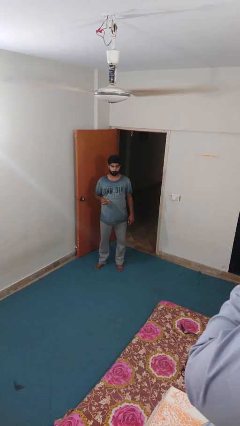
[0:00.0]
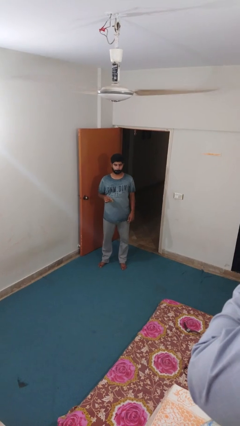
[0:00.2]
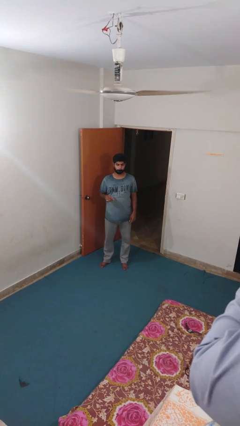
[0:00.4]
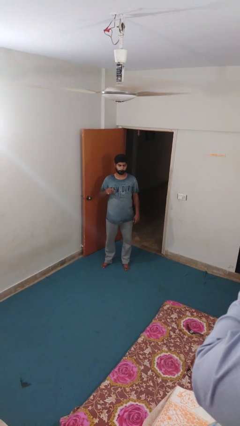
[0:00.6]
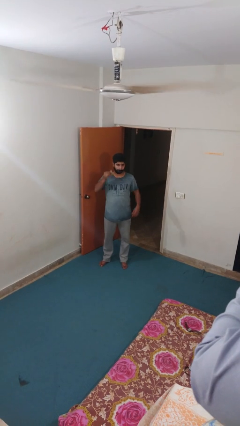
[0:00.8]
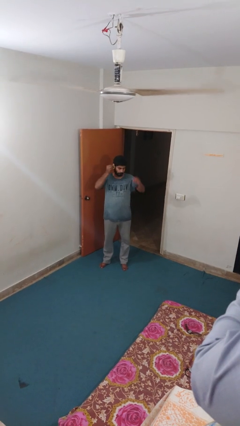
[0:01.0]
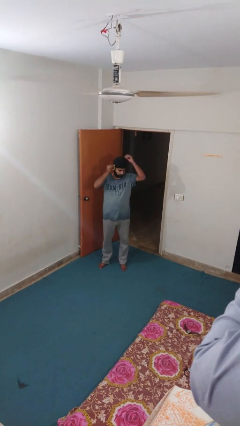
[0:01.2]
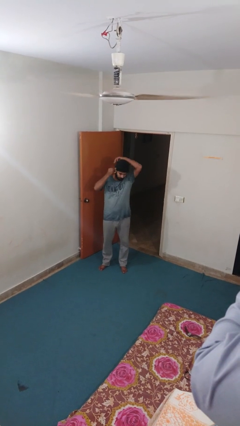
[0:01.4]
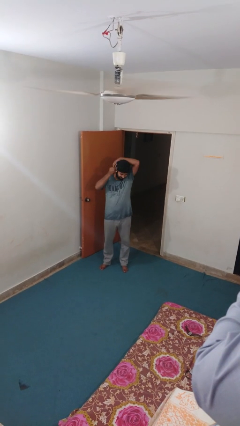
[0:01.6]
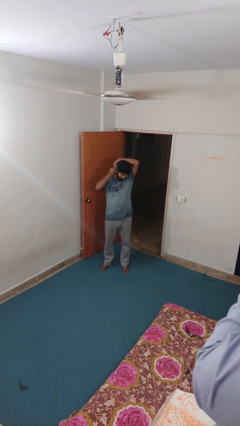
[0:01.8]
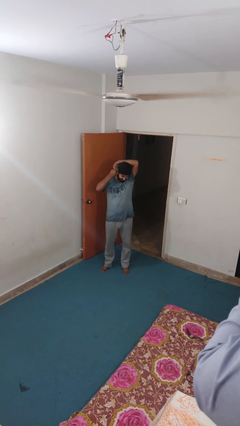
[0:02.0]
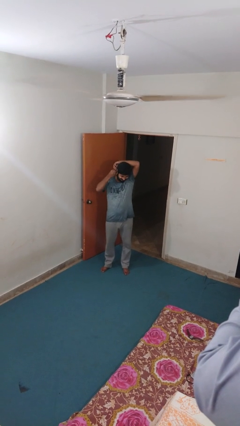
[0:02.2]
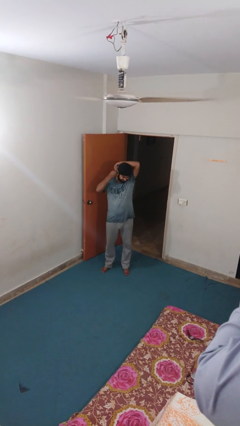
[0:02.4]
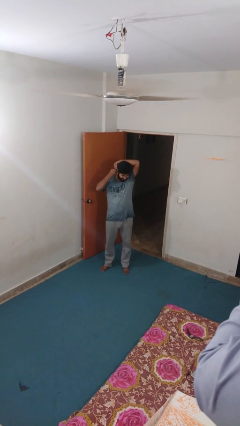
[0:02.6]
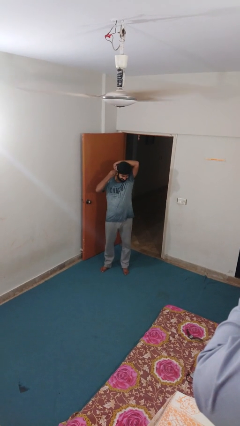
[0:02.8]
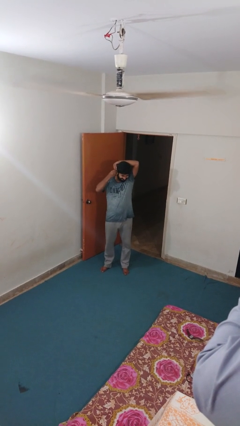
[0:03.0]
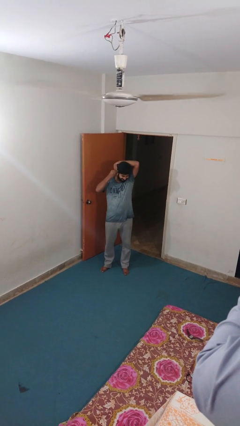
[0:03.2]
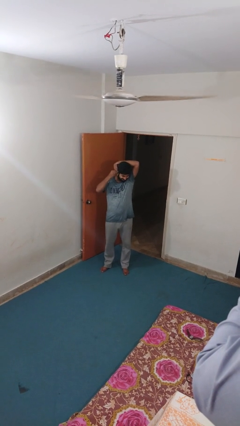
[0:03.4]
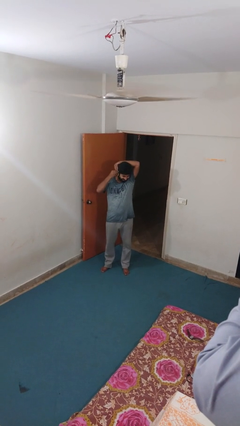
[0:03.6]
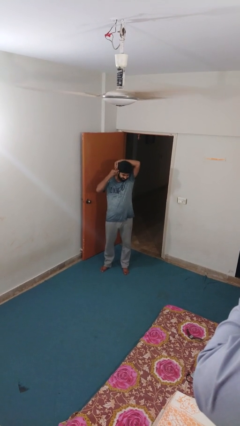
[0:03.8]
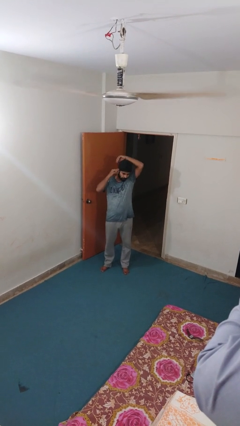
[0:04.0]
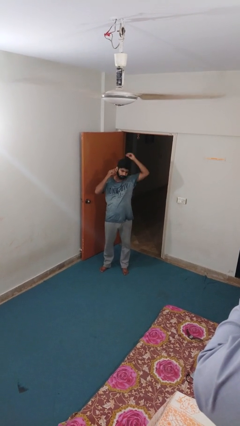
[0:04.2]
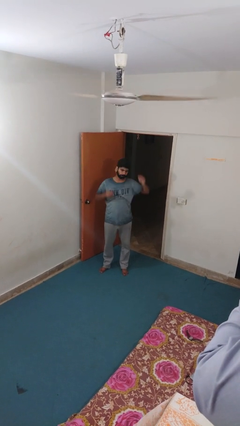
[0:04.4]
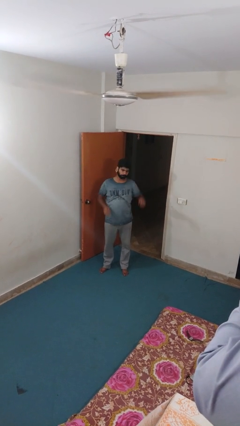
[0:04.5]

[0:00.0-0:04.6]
person puts on earrings

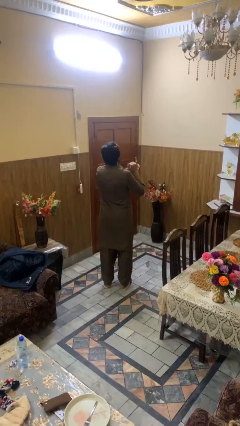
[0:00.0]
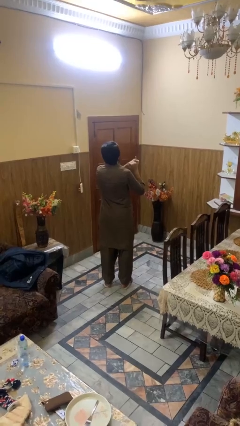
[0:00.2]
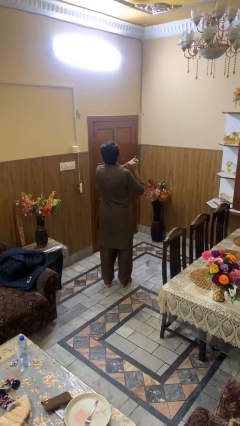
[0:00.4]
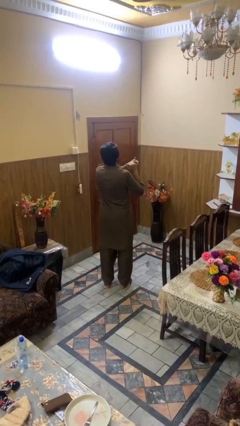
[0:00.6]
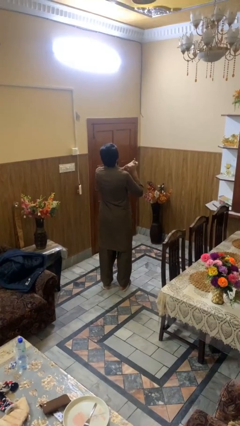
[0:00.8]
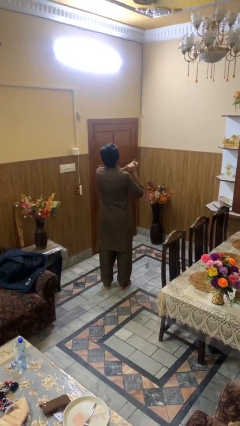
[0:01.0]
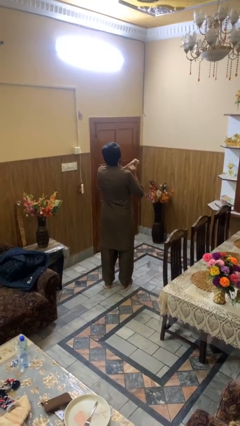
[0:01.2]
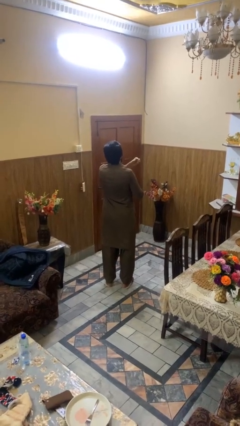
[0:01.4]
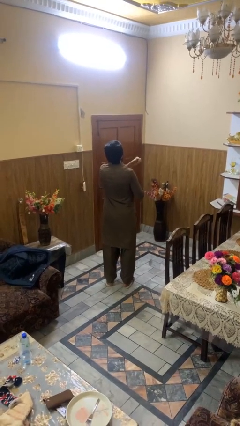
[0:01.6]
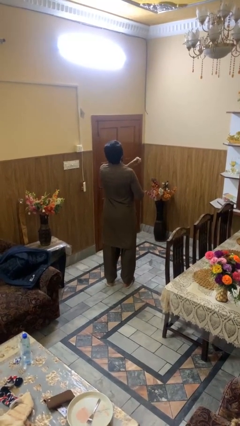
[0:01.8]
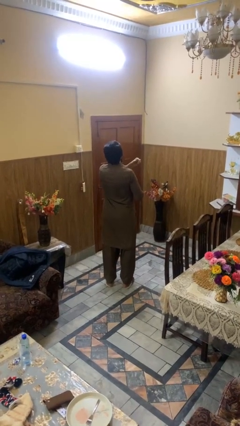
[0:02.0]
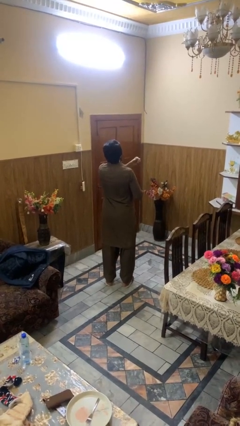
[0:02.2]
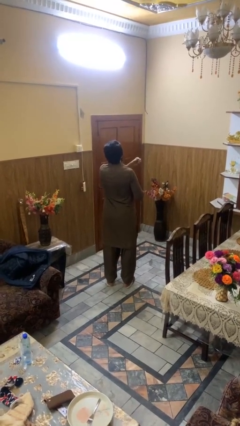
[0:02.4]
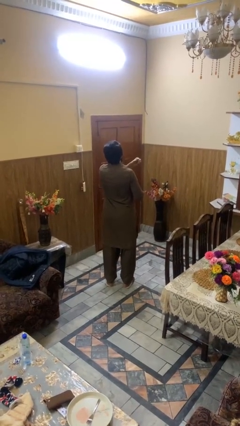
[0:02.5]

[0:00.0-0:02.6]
person takes off ring

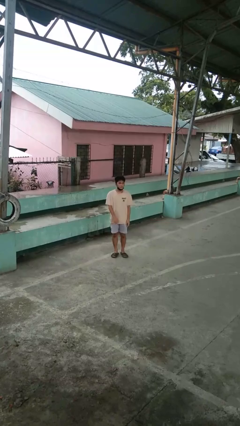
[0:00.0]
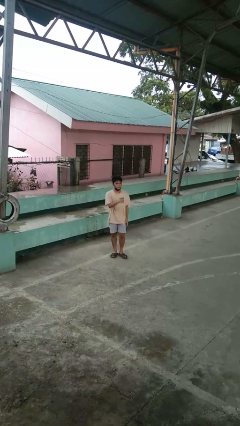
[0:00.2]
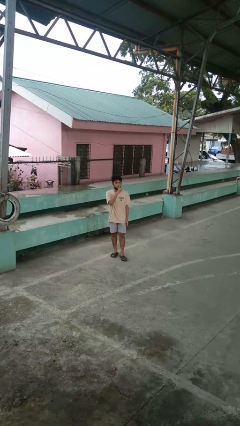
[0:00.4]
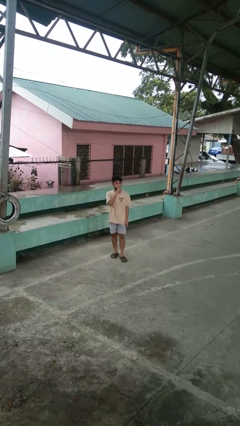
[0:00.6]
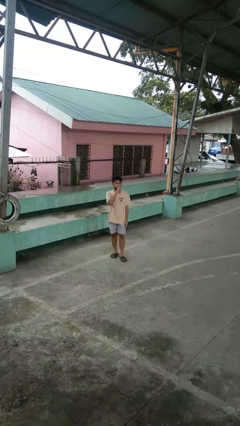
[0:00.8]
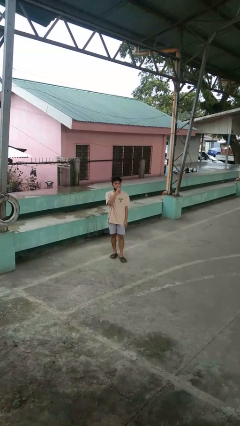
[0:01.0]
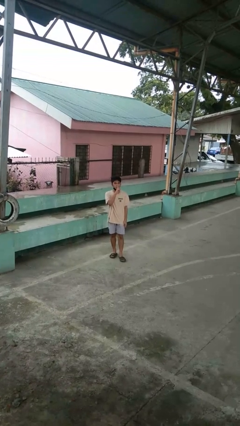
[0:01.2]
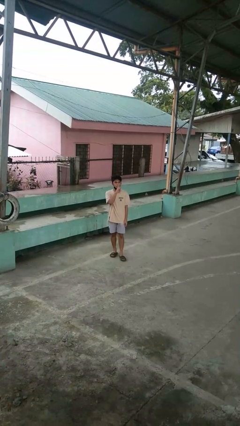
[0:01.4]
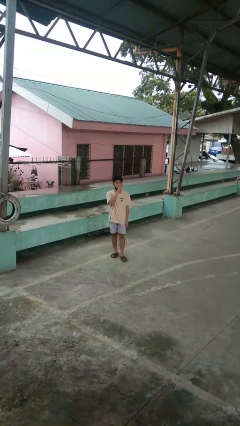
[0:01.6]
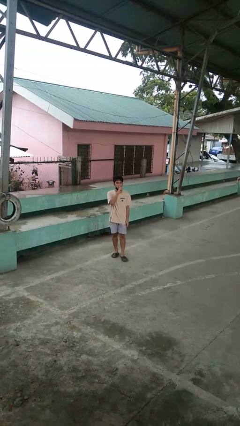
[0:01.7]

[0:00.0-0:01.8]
person gestures be quiet

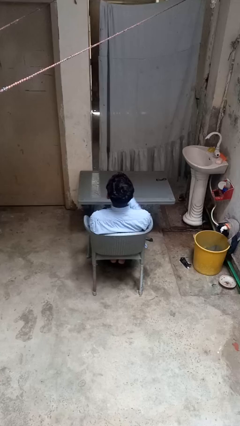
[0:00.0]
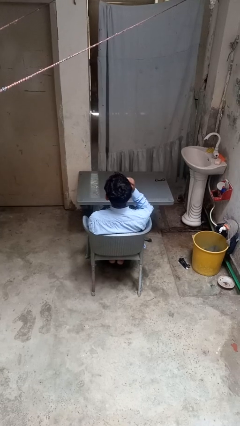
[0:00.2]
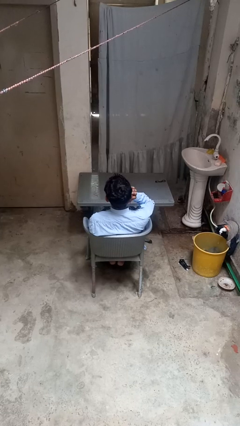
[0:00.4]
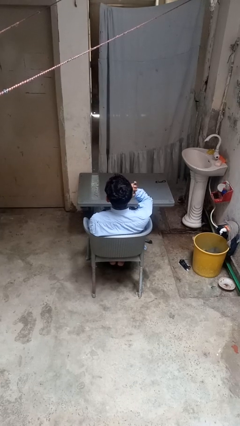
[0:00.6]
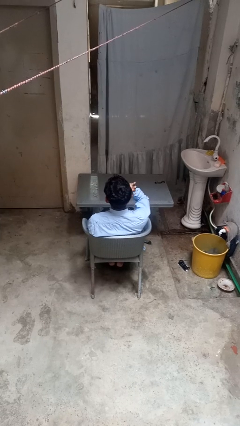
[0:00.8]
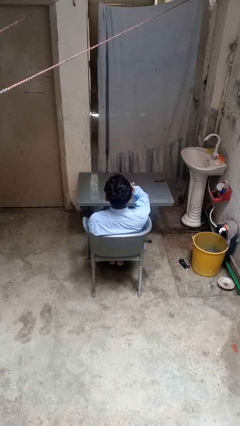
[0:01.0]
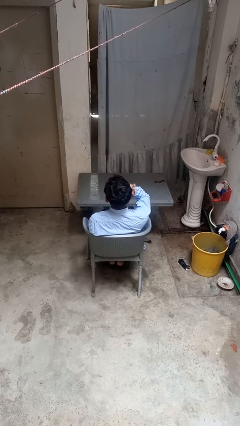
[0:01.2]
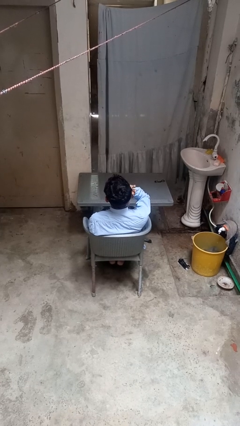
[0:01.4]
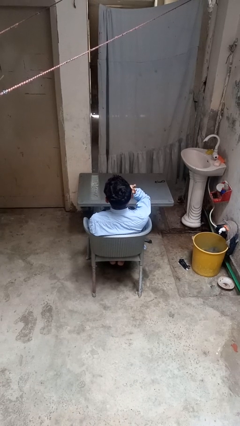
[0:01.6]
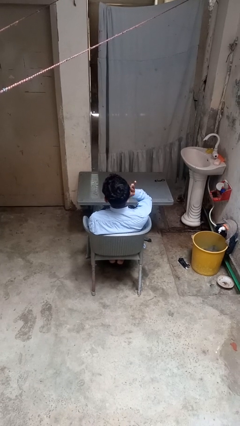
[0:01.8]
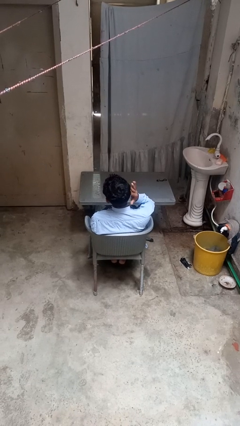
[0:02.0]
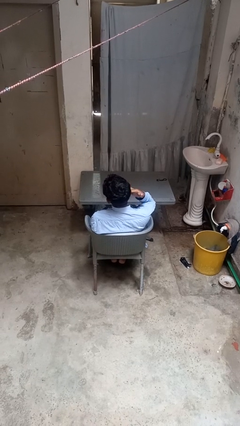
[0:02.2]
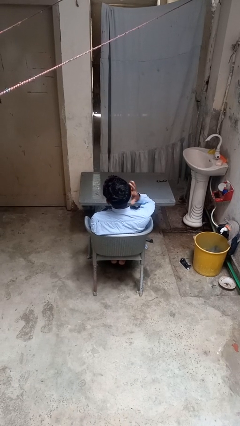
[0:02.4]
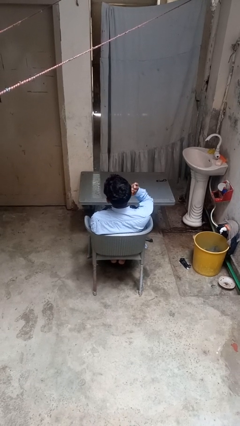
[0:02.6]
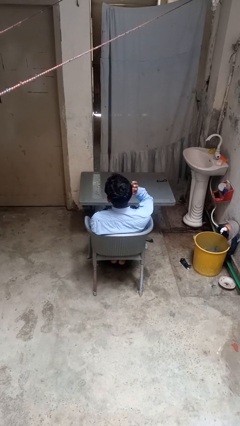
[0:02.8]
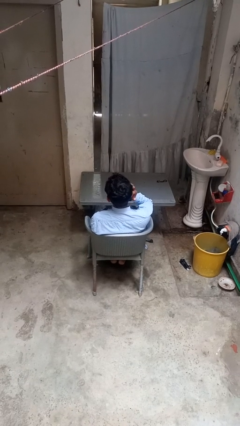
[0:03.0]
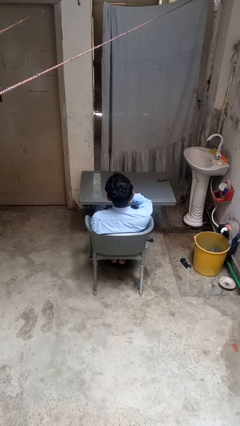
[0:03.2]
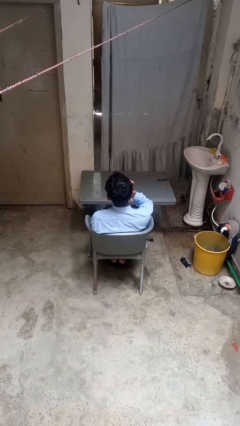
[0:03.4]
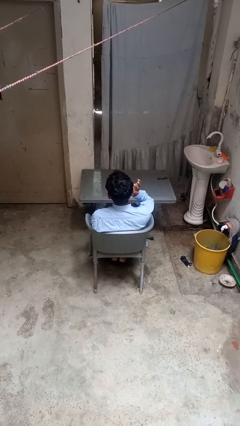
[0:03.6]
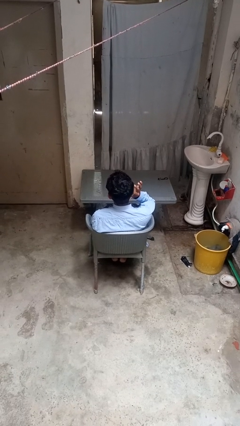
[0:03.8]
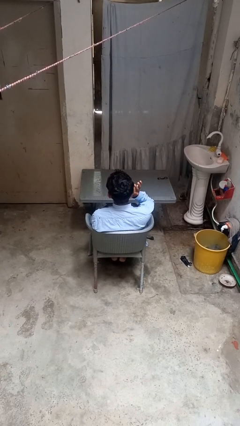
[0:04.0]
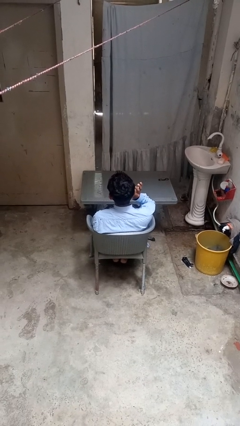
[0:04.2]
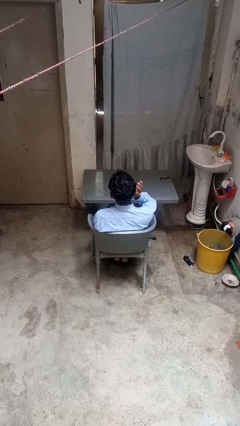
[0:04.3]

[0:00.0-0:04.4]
person puts fingers in ear

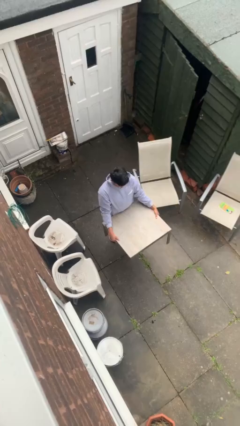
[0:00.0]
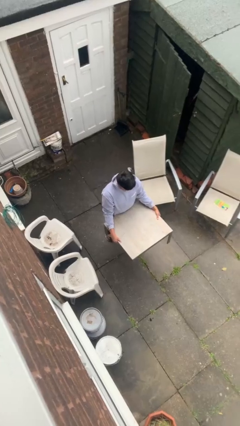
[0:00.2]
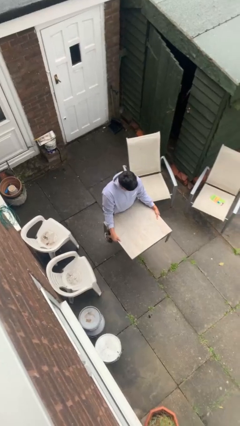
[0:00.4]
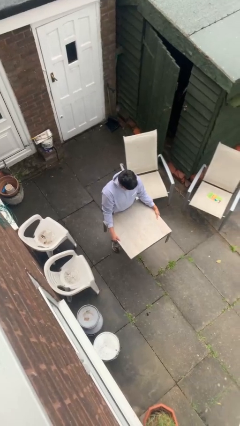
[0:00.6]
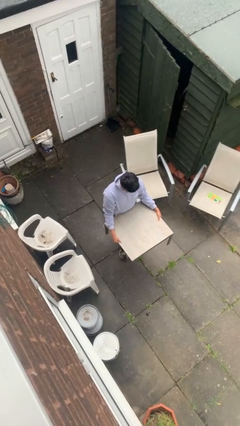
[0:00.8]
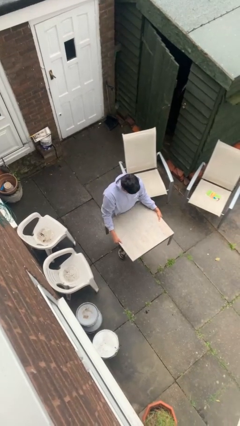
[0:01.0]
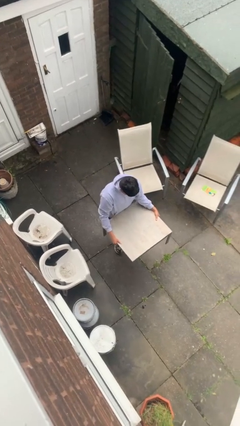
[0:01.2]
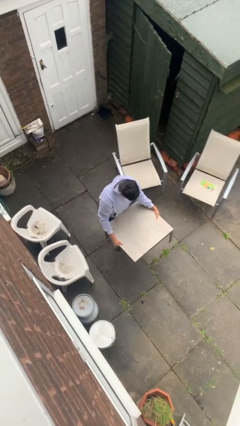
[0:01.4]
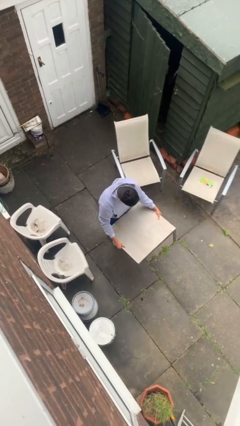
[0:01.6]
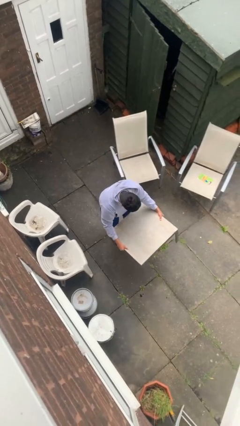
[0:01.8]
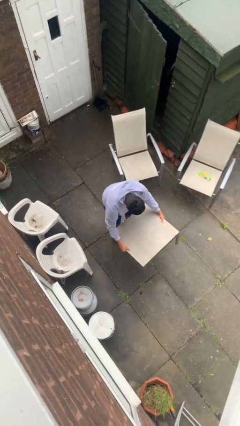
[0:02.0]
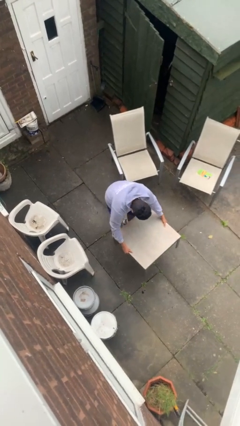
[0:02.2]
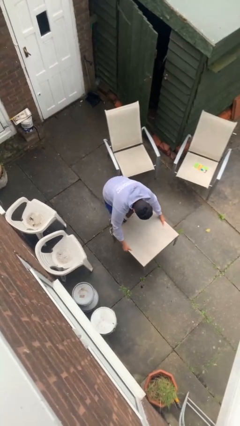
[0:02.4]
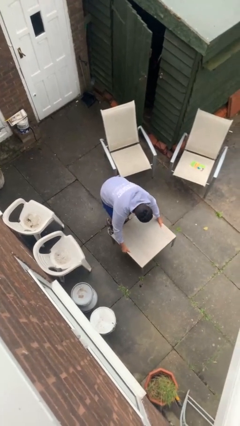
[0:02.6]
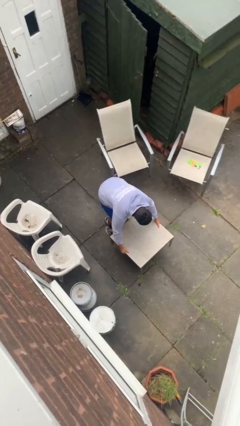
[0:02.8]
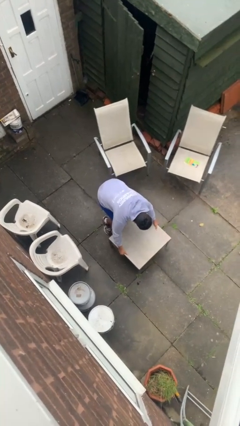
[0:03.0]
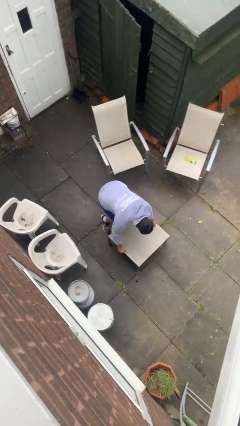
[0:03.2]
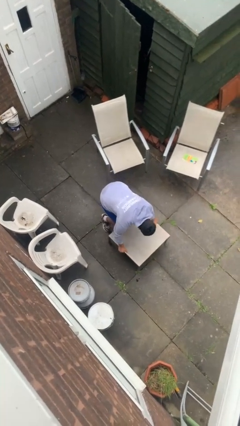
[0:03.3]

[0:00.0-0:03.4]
person puts down object on floor

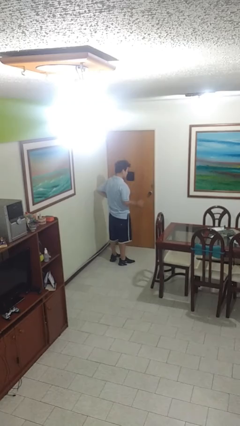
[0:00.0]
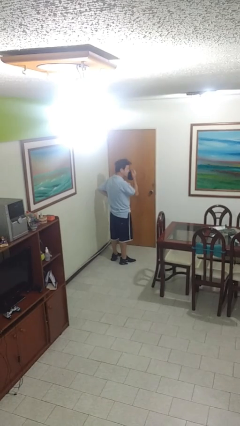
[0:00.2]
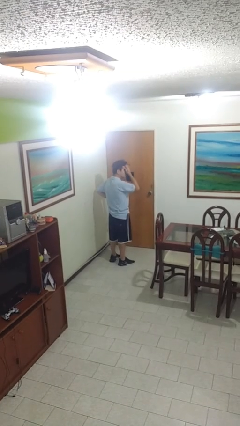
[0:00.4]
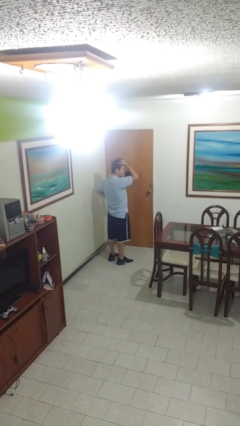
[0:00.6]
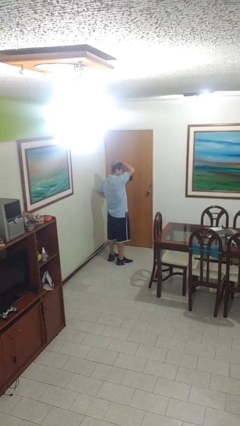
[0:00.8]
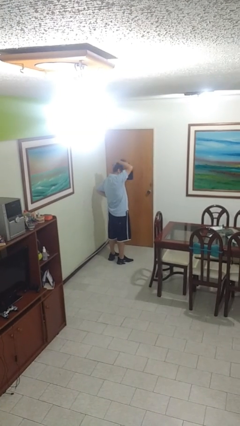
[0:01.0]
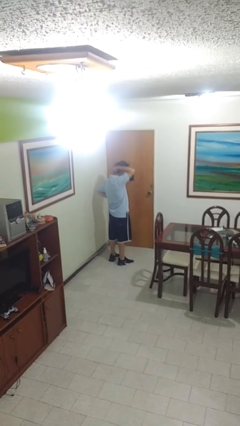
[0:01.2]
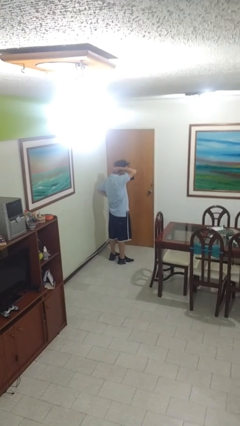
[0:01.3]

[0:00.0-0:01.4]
person strokes hair
